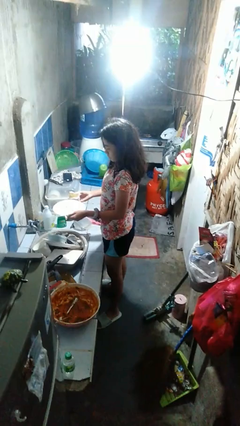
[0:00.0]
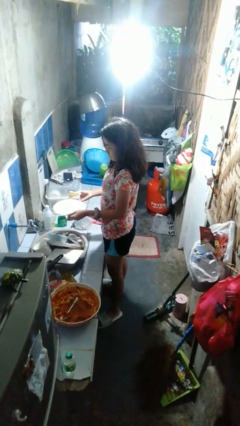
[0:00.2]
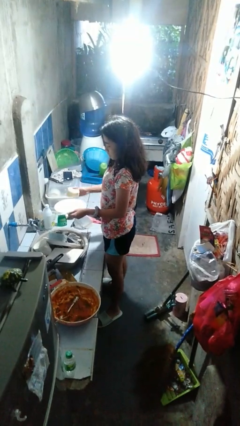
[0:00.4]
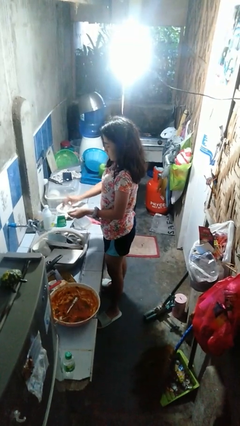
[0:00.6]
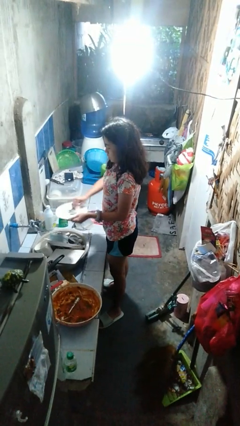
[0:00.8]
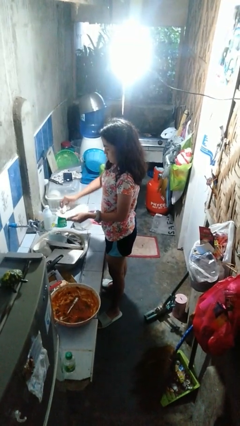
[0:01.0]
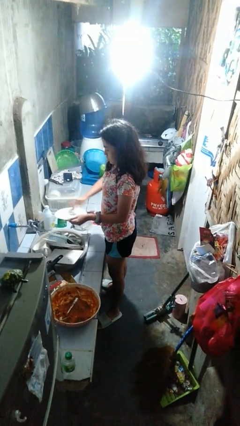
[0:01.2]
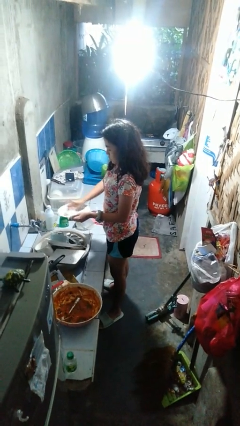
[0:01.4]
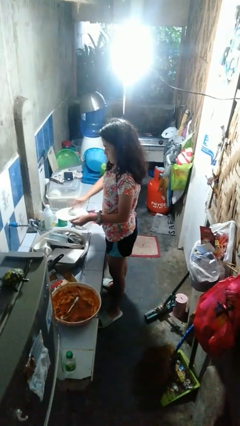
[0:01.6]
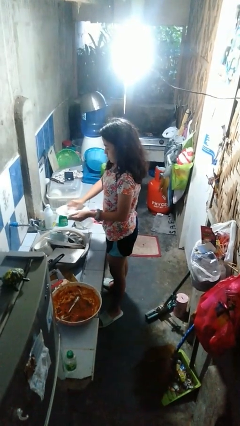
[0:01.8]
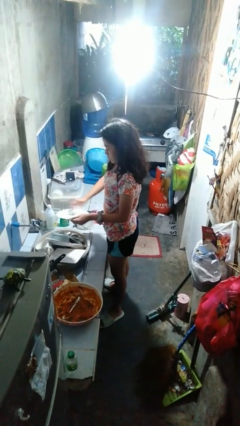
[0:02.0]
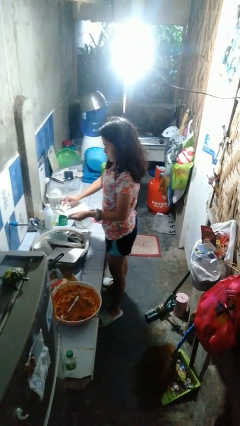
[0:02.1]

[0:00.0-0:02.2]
person washes dish

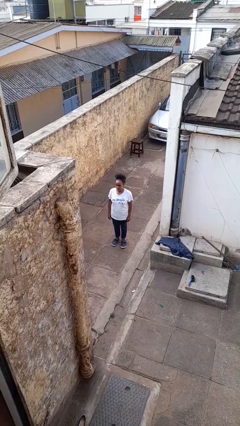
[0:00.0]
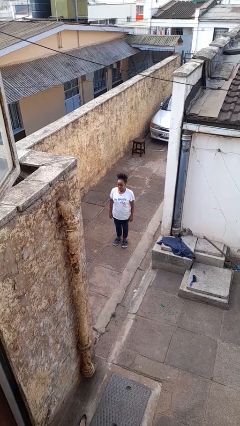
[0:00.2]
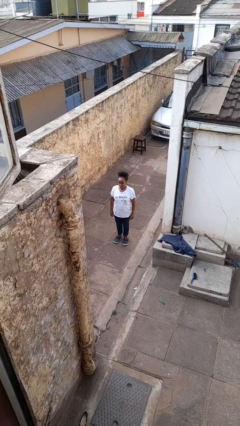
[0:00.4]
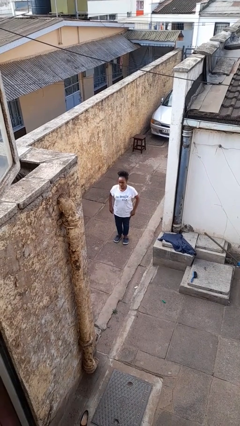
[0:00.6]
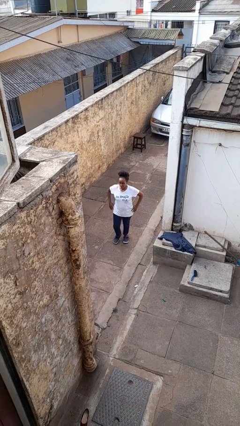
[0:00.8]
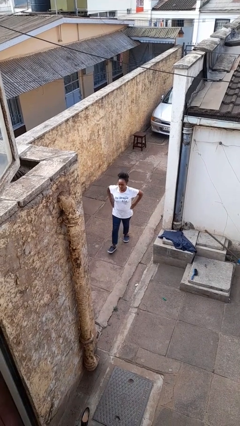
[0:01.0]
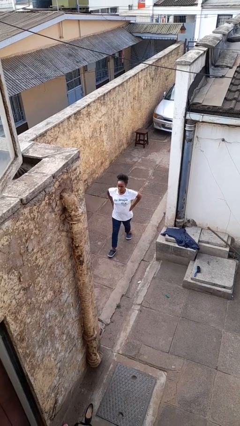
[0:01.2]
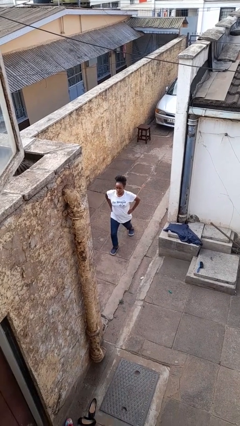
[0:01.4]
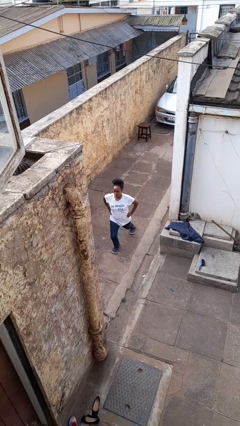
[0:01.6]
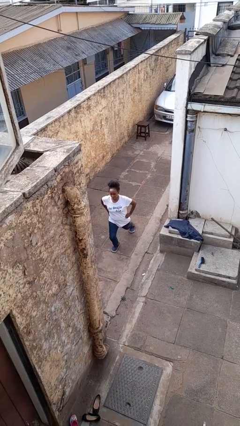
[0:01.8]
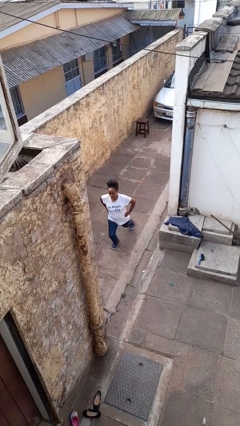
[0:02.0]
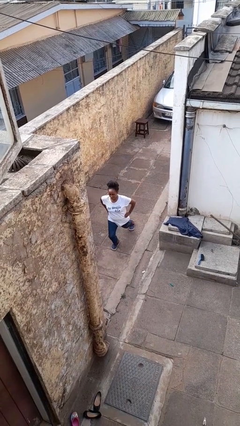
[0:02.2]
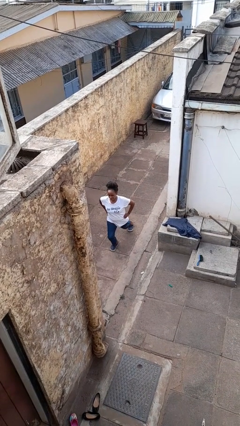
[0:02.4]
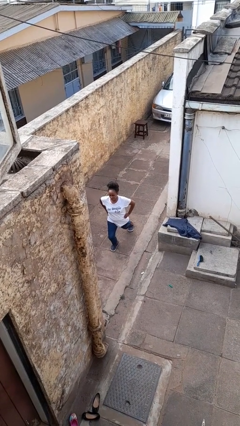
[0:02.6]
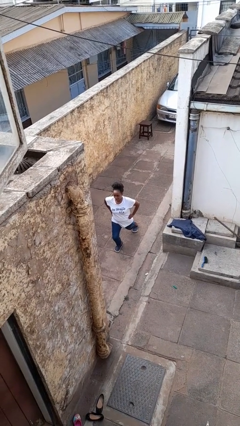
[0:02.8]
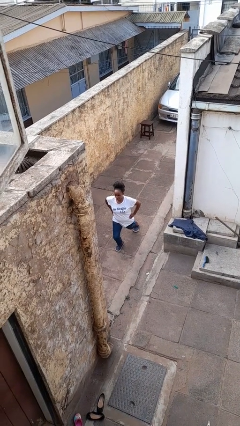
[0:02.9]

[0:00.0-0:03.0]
person exercises with lunges

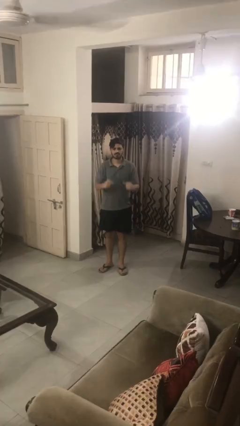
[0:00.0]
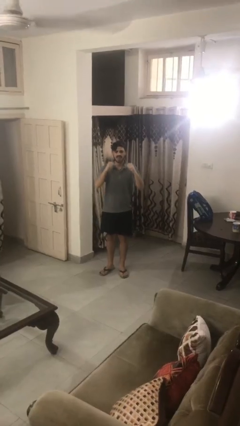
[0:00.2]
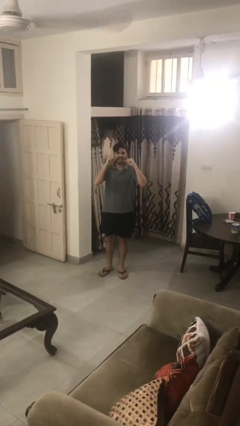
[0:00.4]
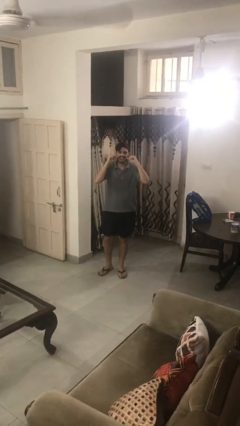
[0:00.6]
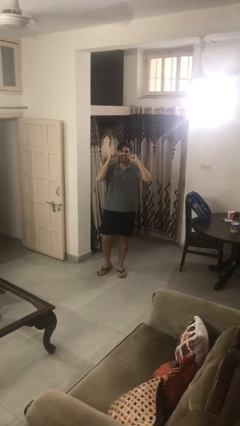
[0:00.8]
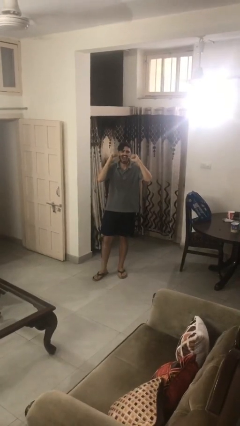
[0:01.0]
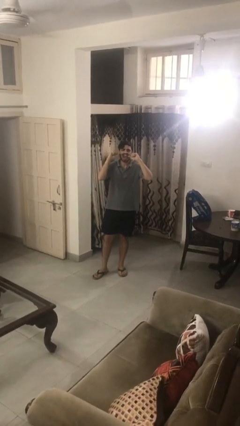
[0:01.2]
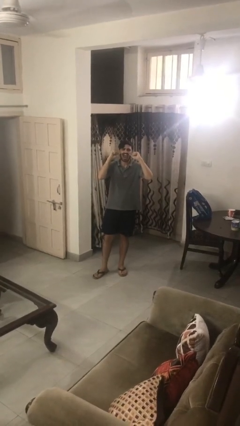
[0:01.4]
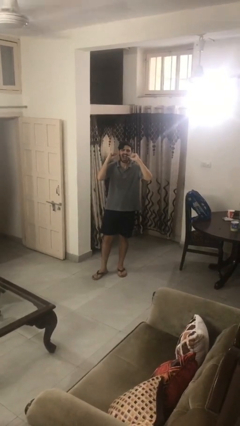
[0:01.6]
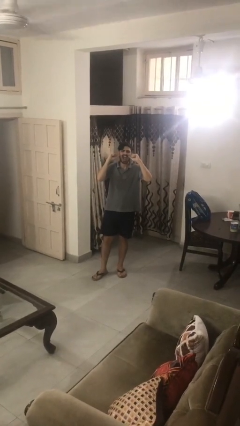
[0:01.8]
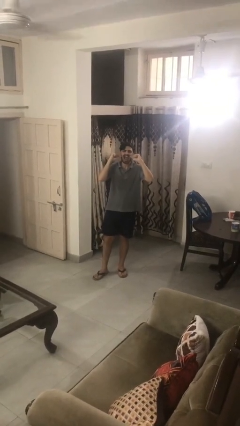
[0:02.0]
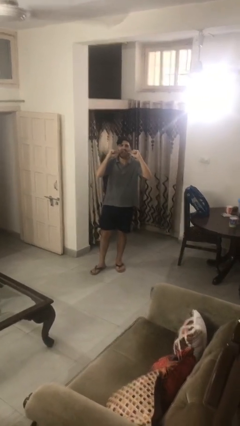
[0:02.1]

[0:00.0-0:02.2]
person flosses

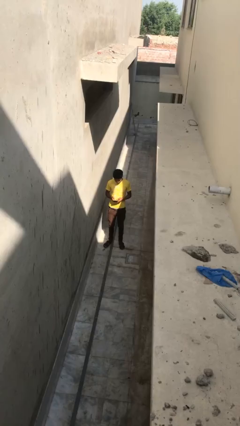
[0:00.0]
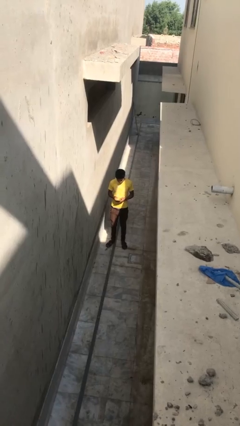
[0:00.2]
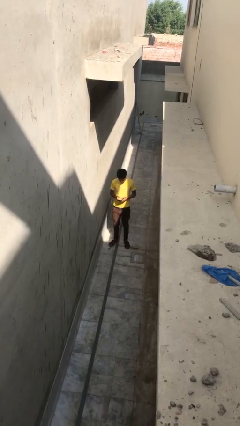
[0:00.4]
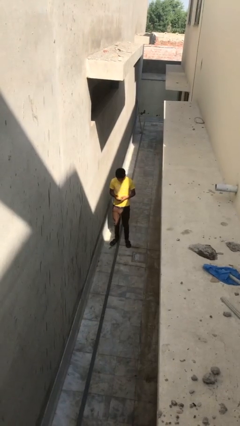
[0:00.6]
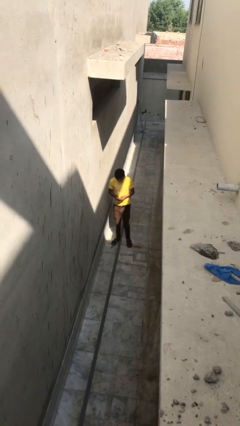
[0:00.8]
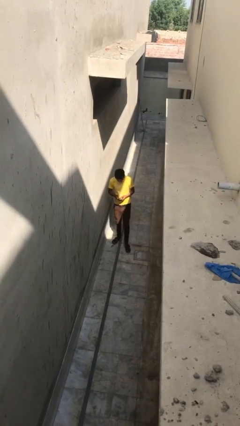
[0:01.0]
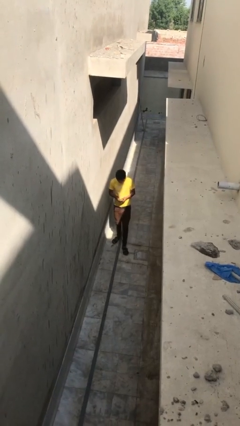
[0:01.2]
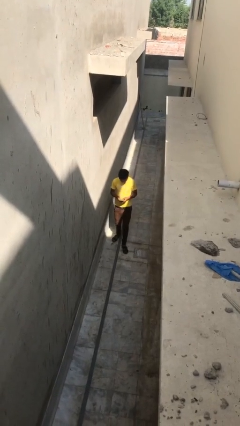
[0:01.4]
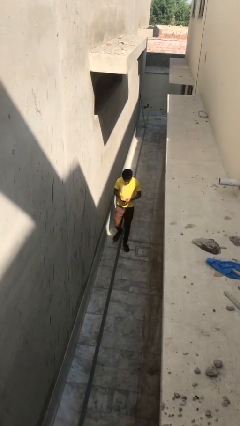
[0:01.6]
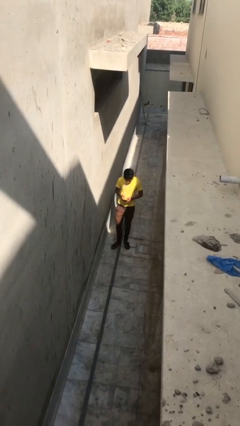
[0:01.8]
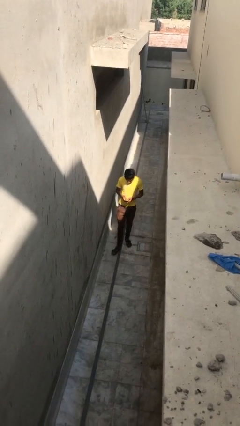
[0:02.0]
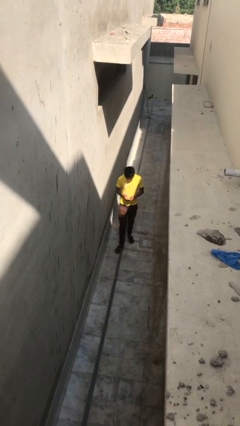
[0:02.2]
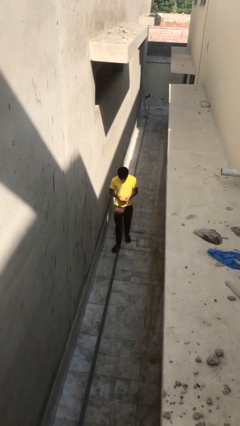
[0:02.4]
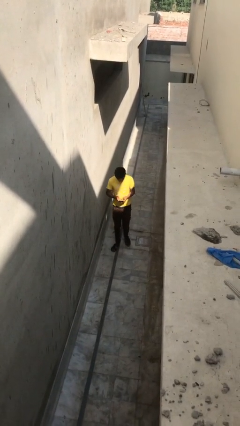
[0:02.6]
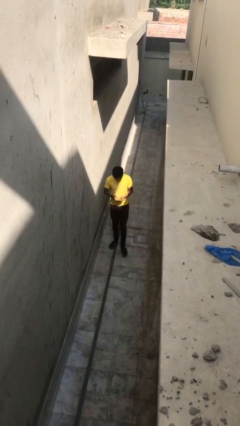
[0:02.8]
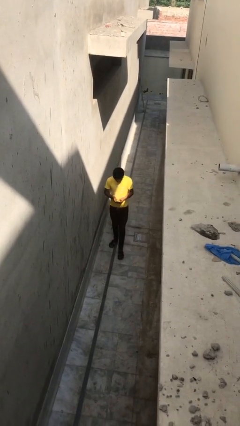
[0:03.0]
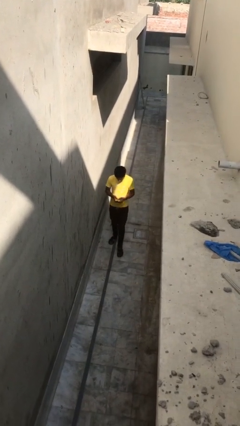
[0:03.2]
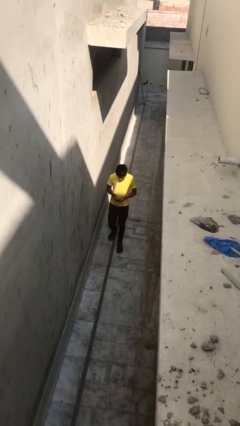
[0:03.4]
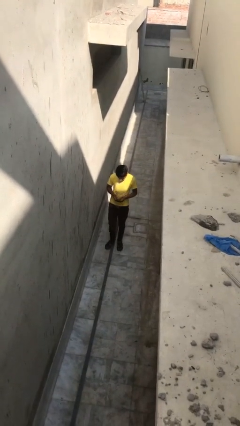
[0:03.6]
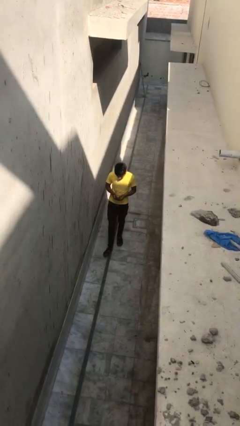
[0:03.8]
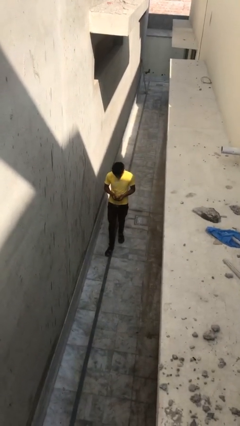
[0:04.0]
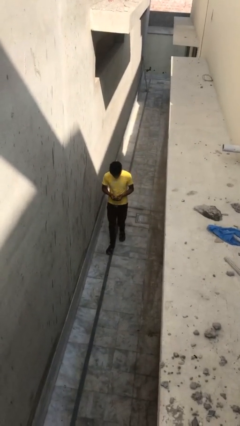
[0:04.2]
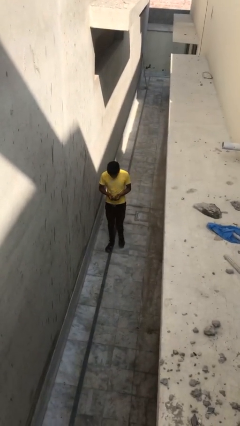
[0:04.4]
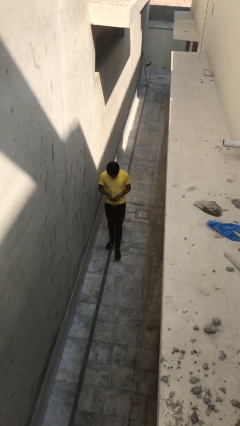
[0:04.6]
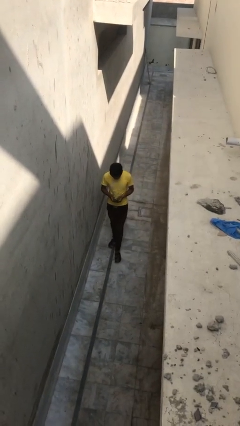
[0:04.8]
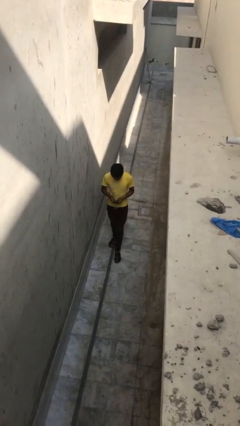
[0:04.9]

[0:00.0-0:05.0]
person texts on phone

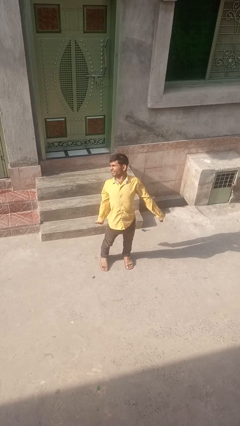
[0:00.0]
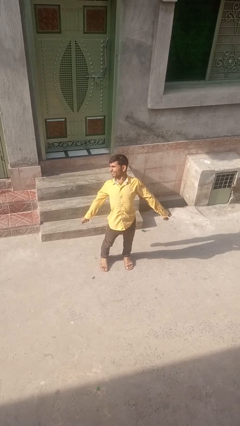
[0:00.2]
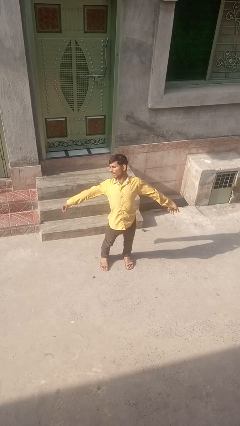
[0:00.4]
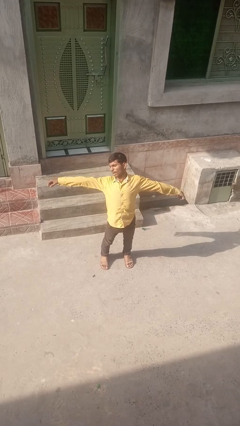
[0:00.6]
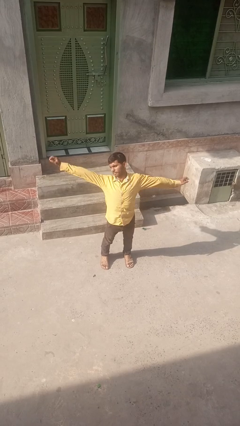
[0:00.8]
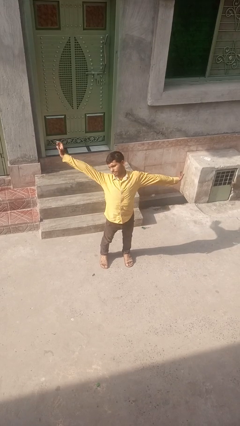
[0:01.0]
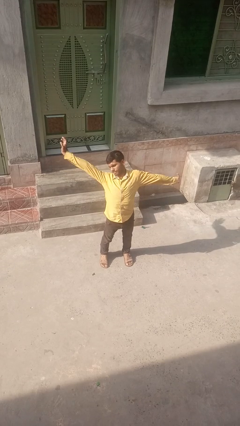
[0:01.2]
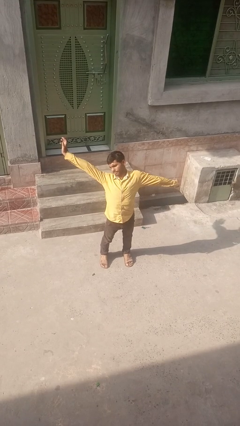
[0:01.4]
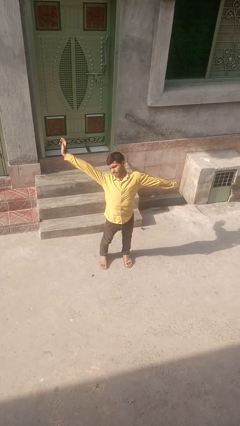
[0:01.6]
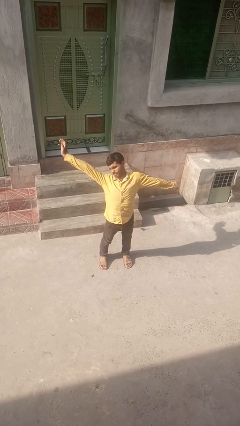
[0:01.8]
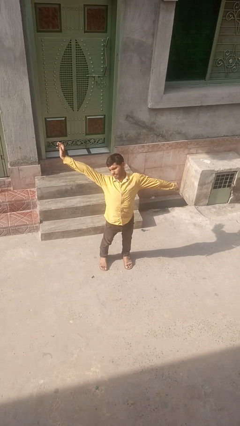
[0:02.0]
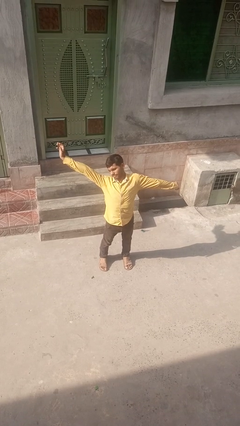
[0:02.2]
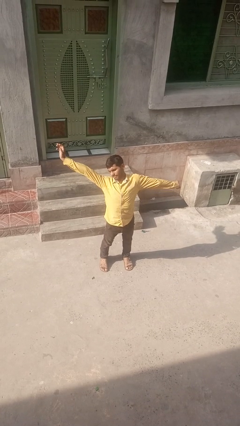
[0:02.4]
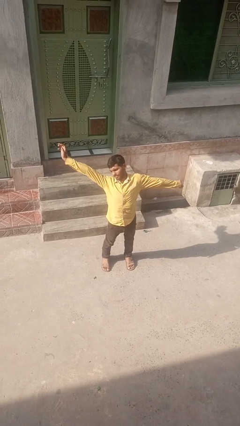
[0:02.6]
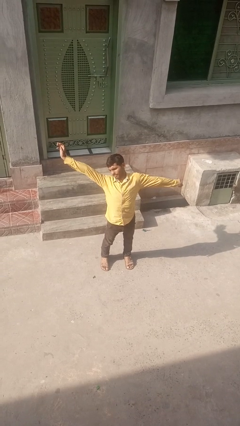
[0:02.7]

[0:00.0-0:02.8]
person stretches arms to side

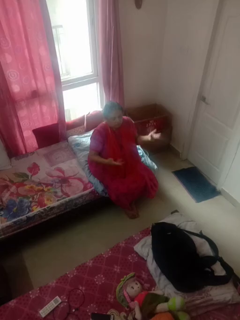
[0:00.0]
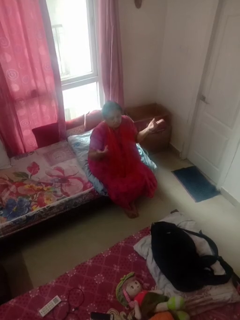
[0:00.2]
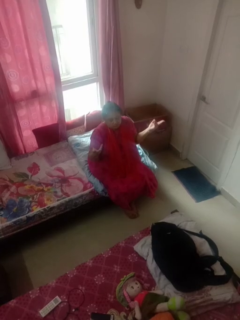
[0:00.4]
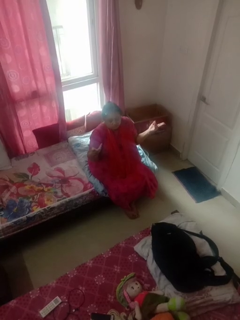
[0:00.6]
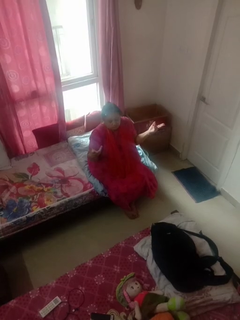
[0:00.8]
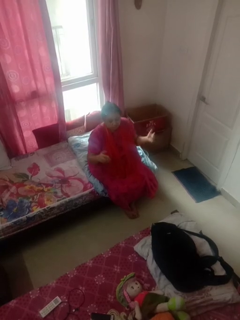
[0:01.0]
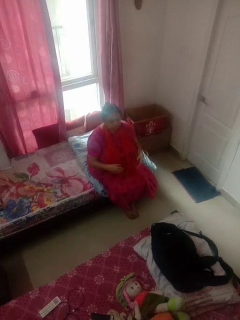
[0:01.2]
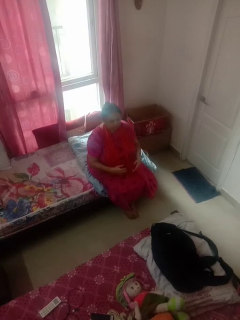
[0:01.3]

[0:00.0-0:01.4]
person shrugs

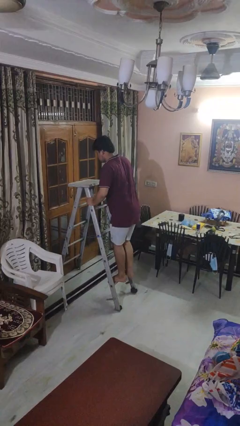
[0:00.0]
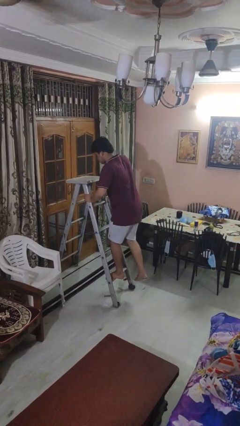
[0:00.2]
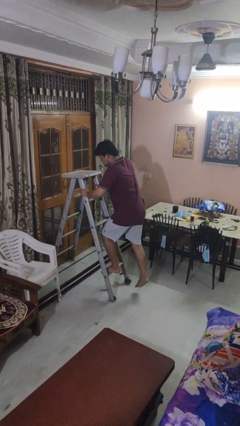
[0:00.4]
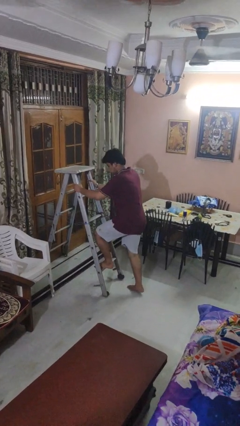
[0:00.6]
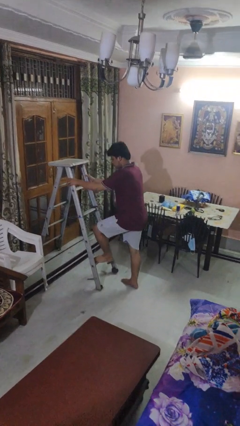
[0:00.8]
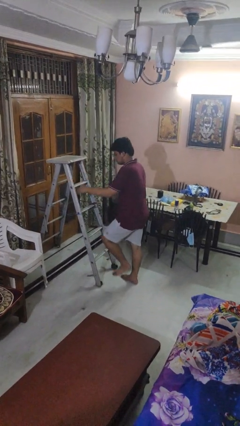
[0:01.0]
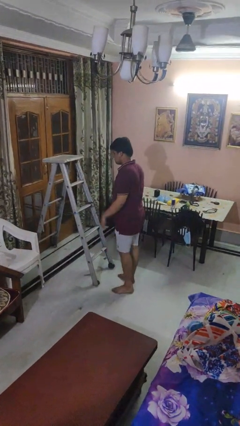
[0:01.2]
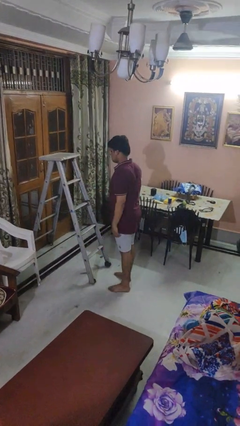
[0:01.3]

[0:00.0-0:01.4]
person climbs down ladder
